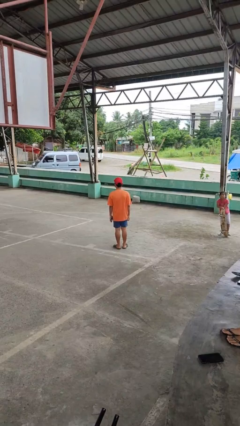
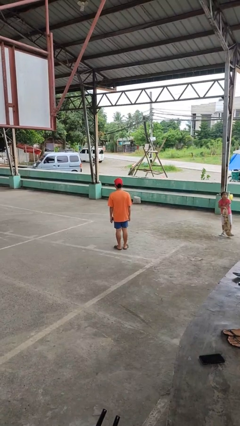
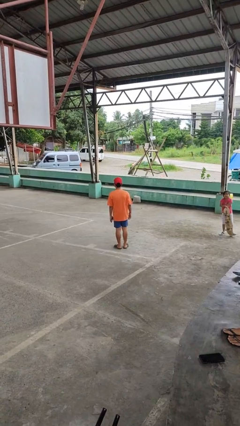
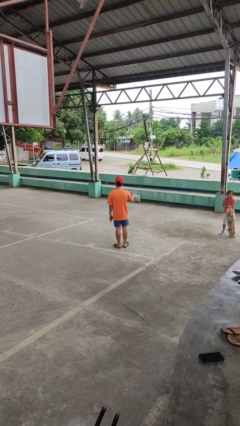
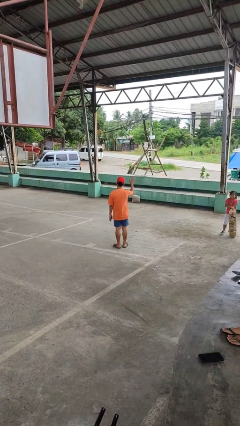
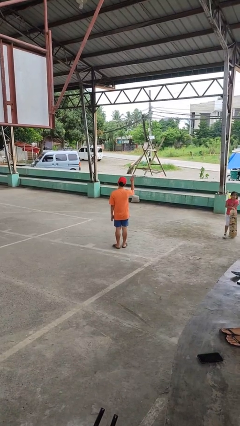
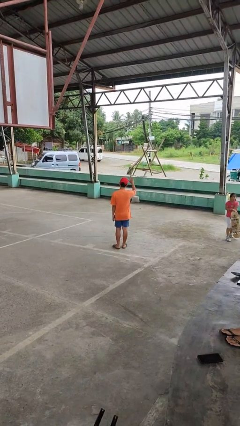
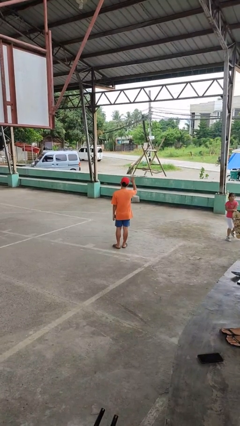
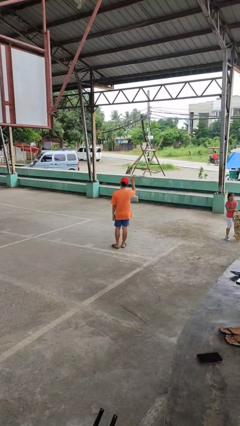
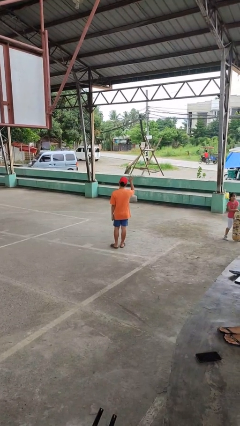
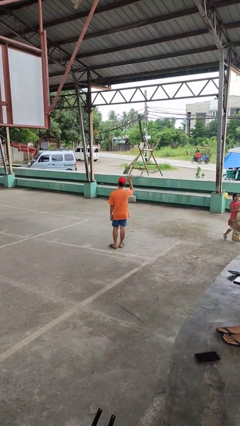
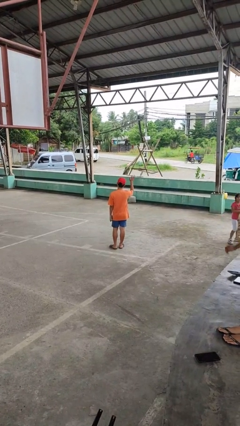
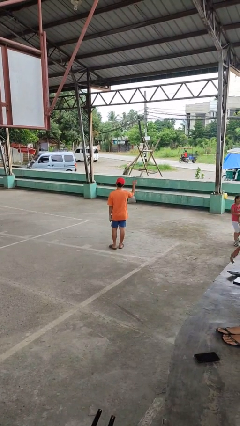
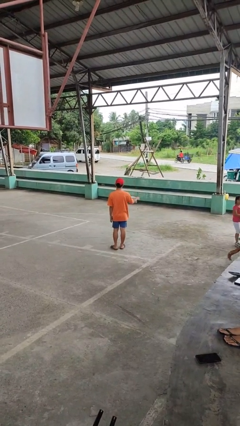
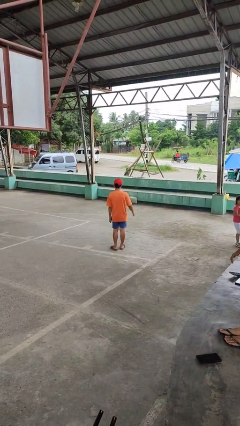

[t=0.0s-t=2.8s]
person waves at person

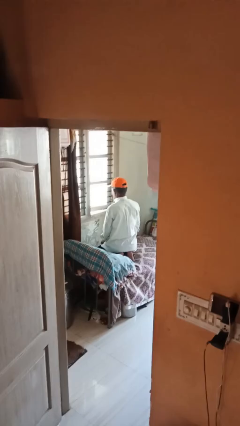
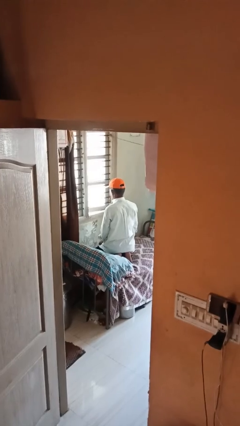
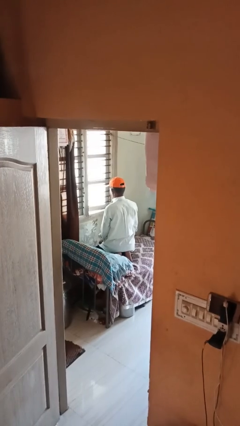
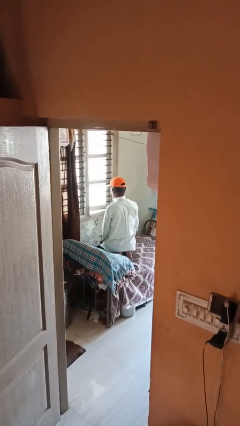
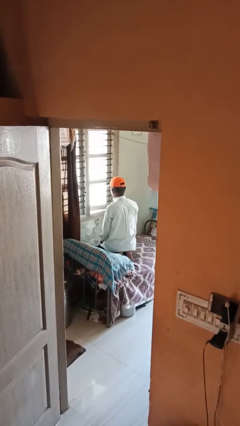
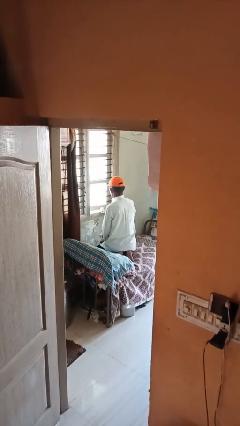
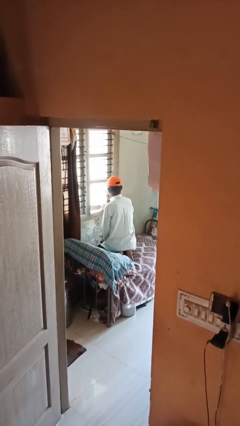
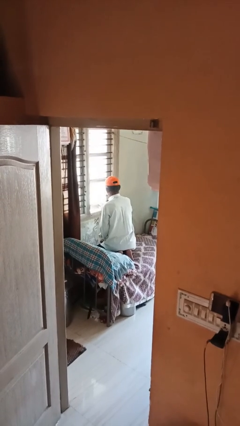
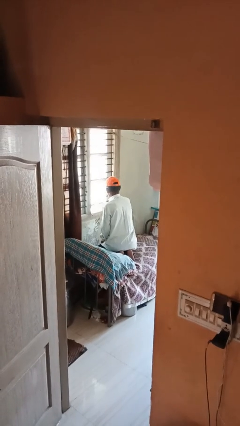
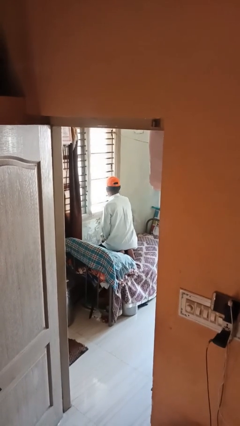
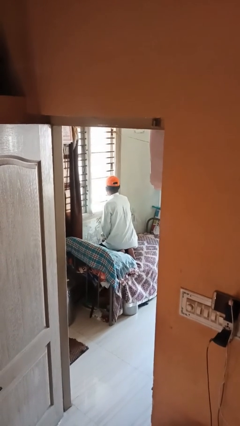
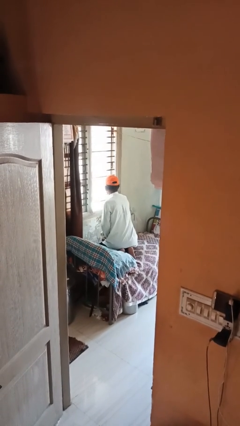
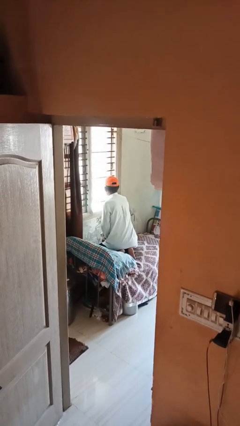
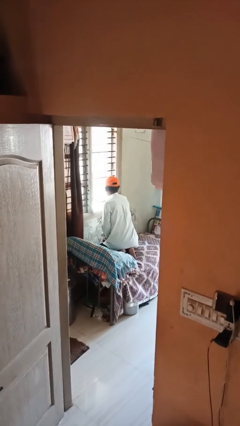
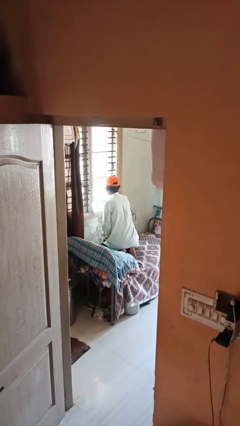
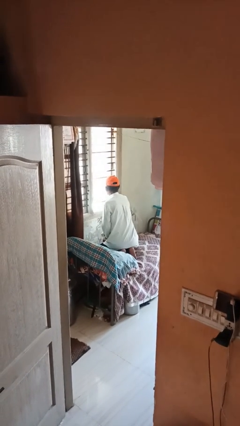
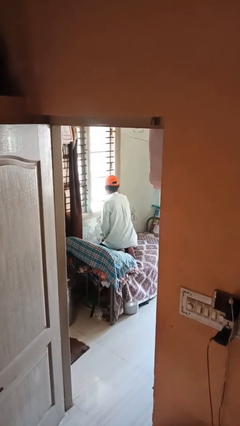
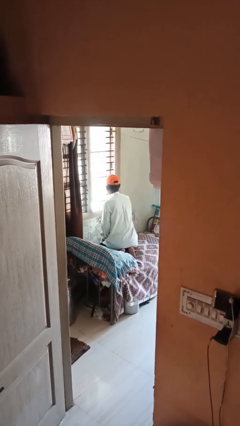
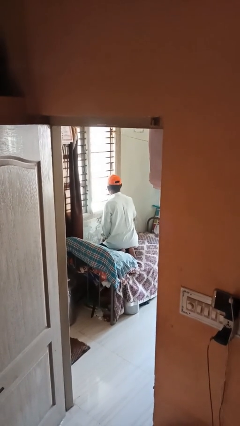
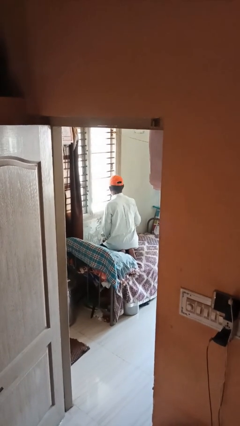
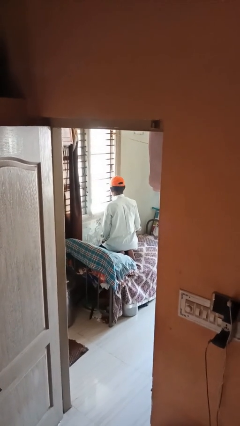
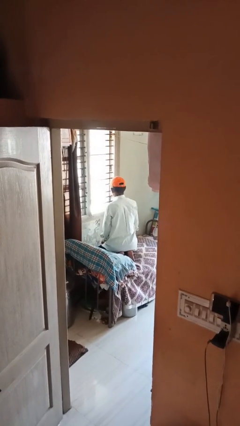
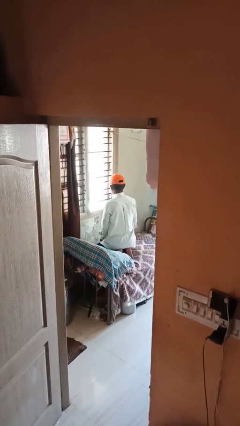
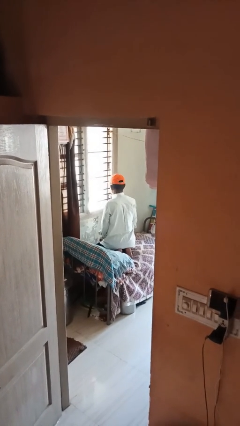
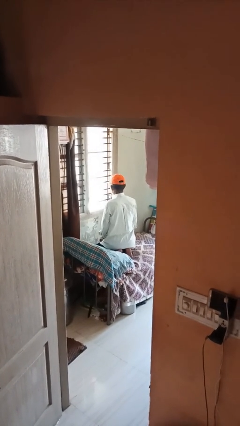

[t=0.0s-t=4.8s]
person opens home window

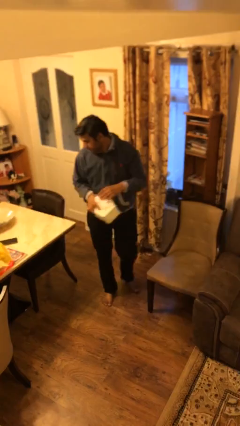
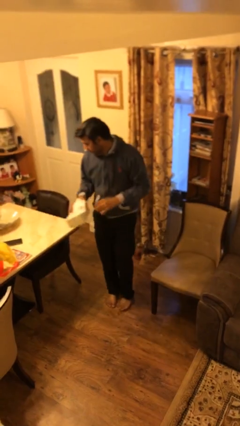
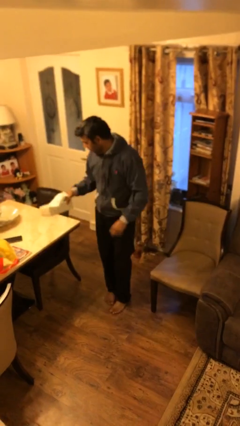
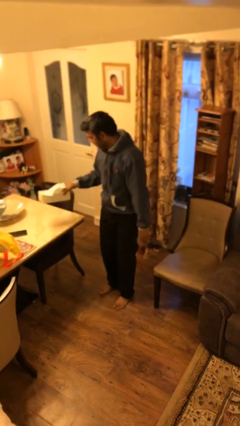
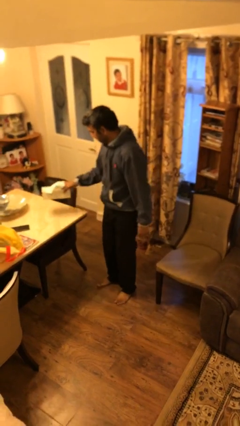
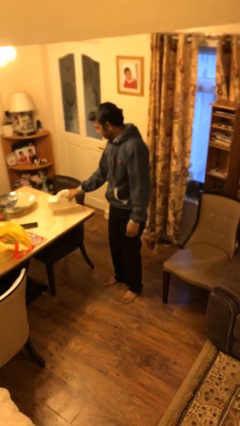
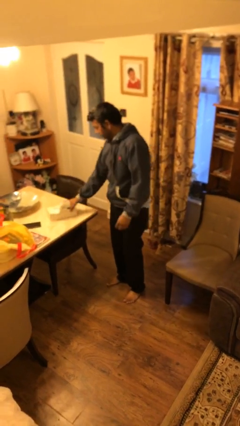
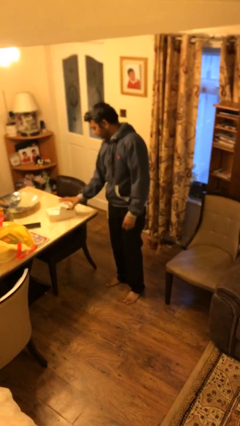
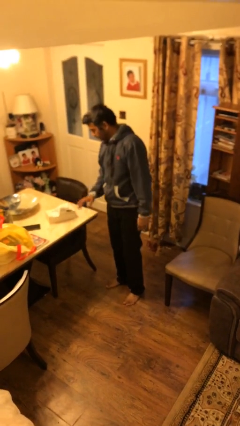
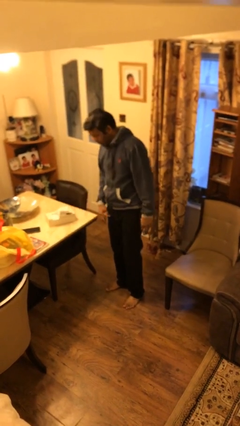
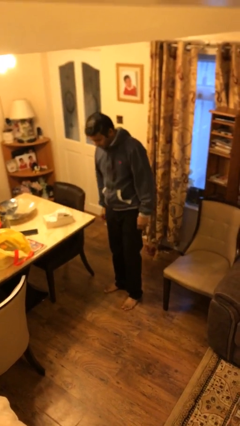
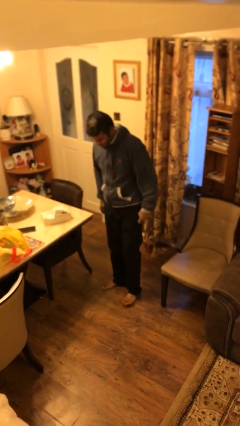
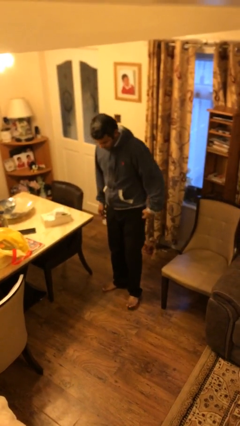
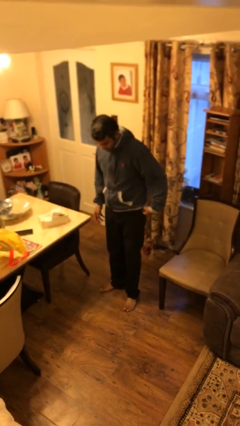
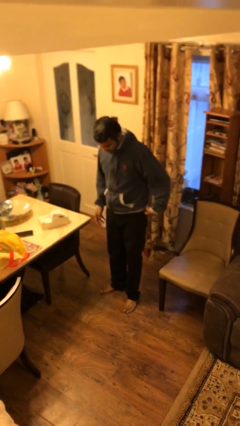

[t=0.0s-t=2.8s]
person puts down object on table

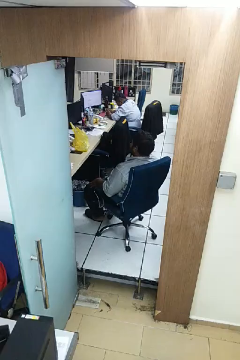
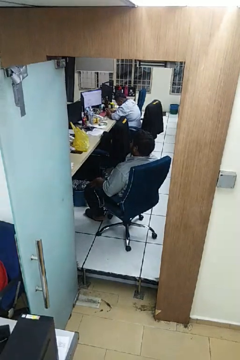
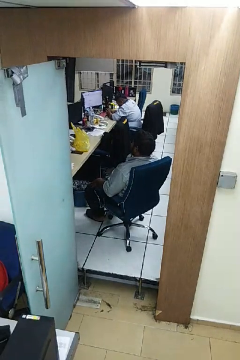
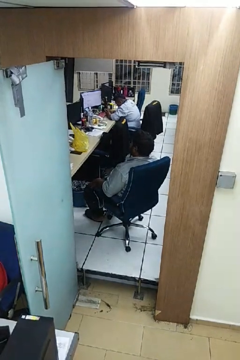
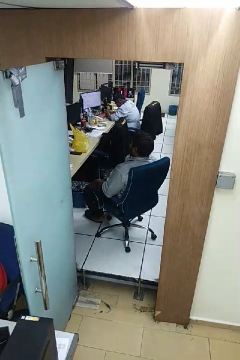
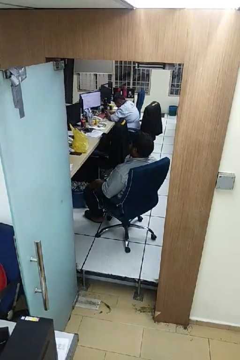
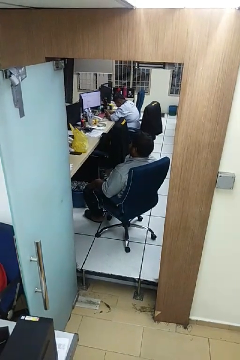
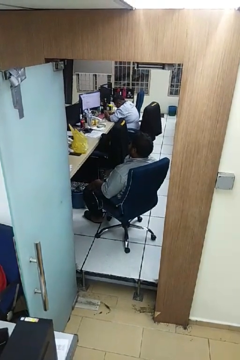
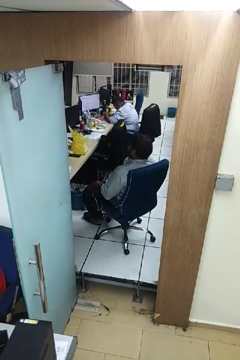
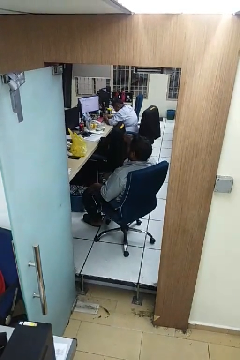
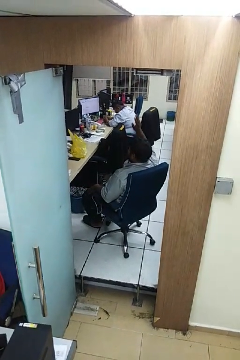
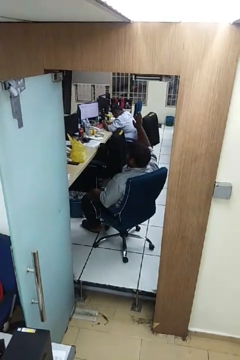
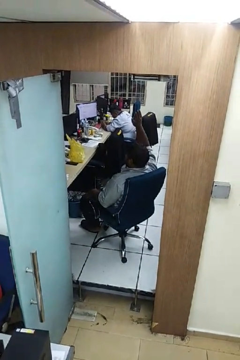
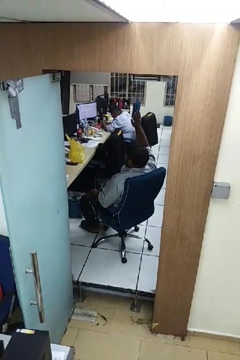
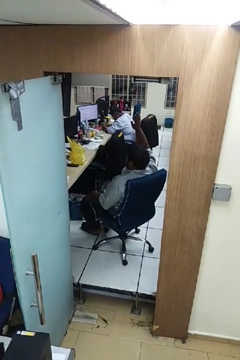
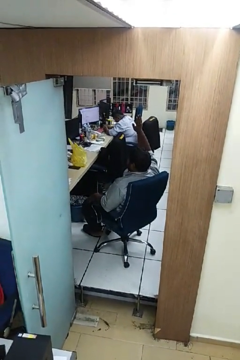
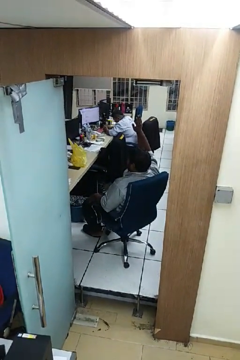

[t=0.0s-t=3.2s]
person gestures raise hand

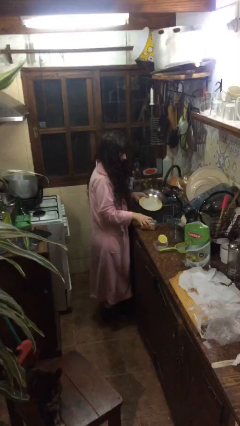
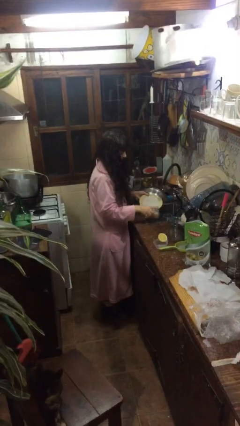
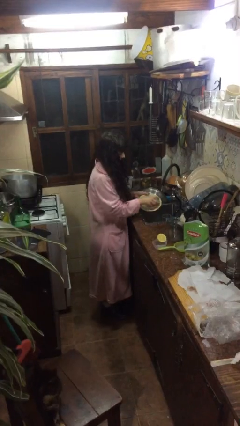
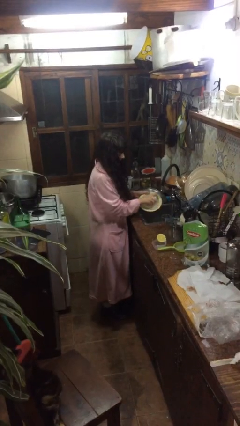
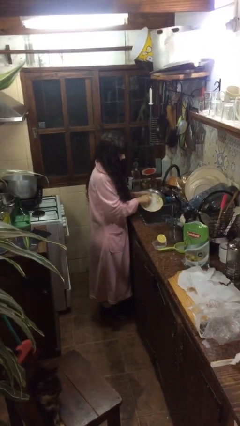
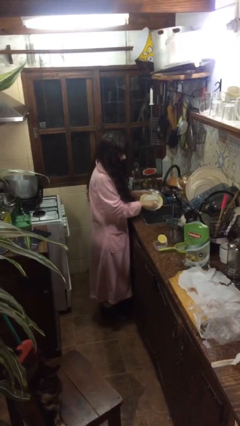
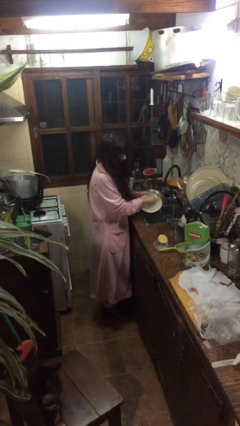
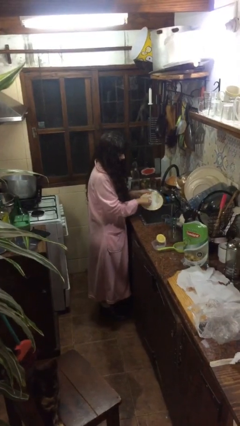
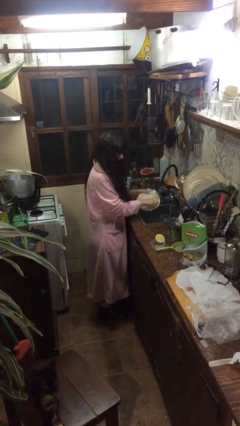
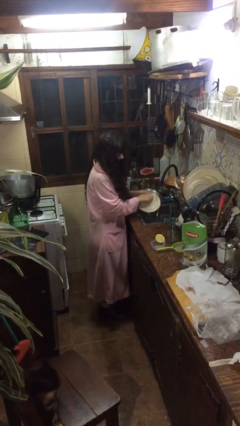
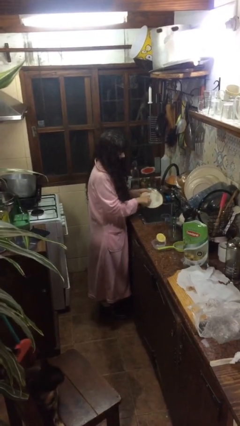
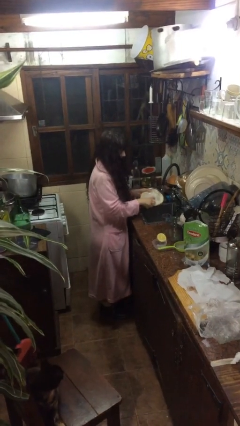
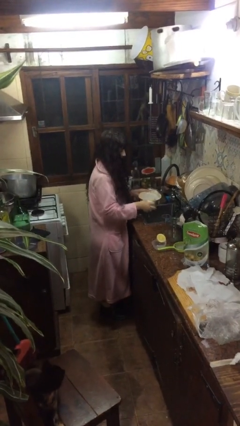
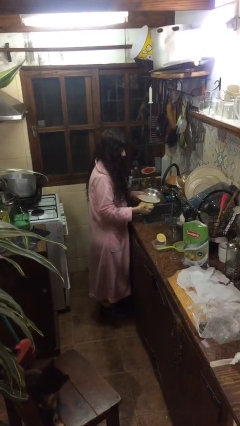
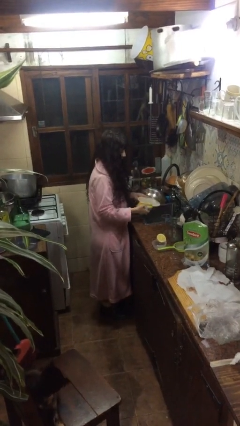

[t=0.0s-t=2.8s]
person washes dish

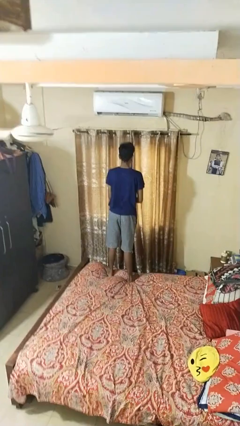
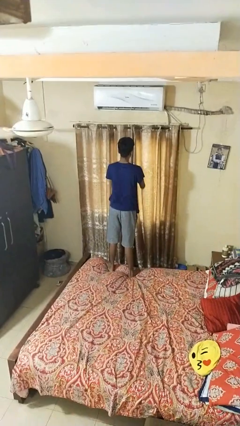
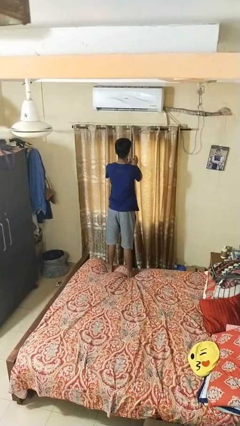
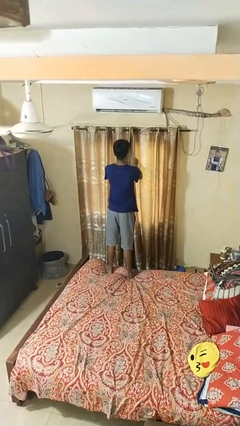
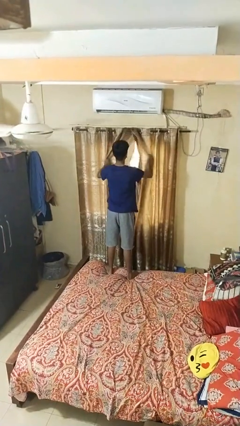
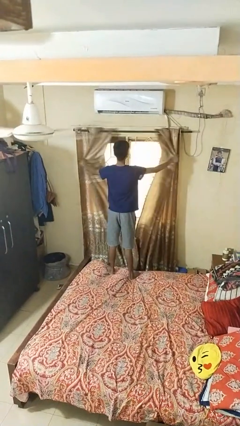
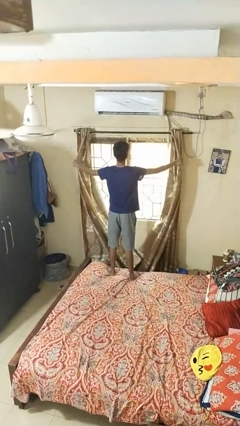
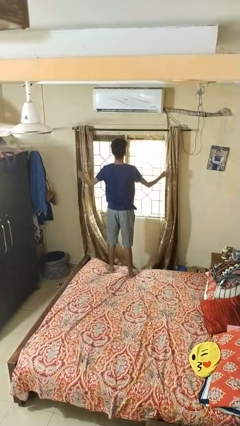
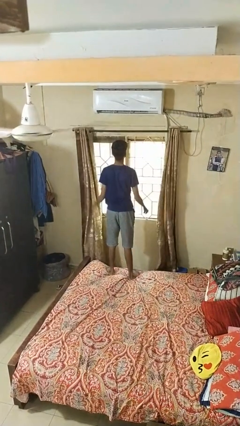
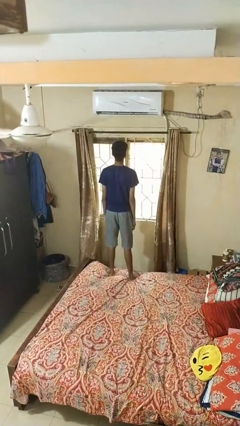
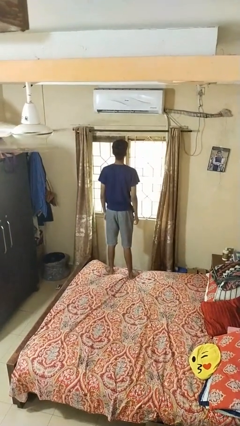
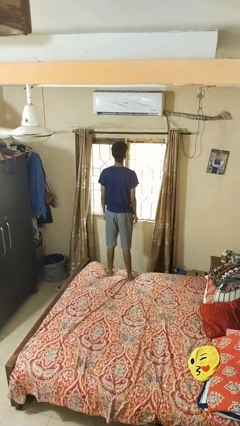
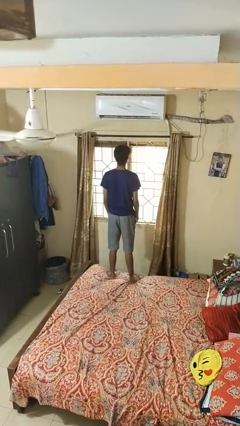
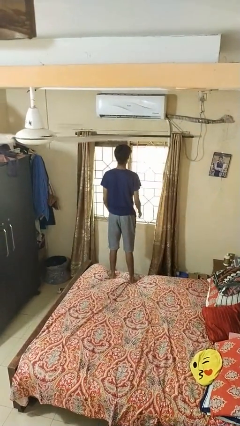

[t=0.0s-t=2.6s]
person opens curtains
